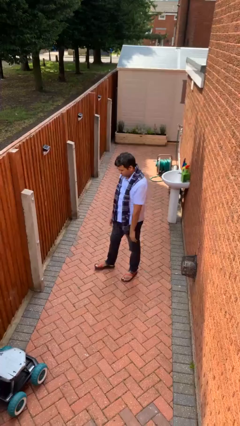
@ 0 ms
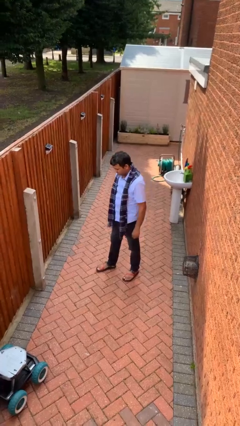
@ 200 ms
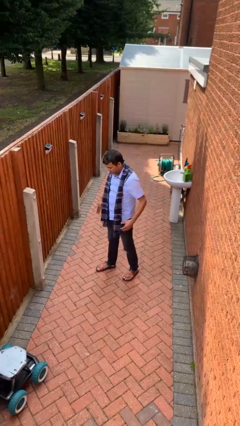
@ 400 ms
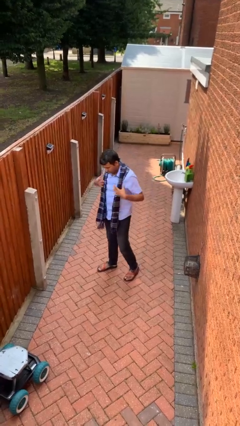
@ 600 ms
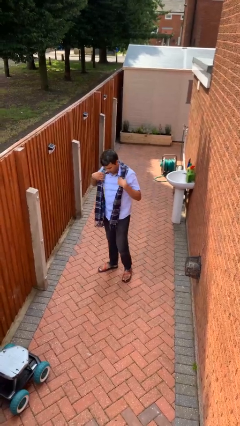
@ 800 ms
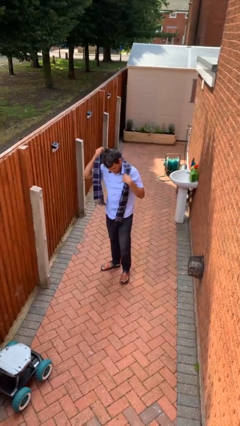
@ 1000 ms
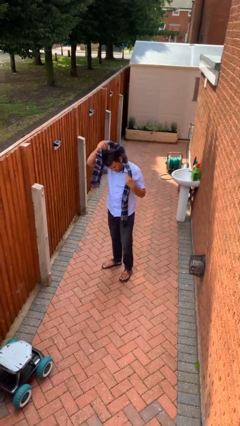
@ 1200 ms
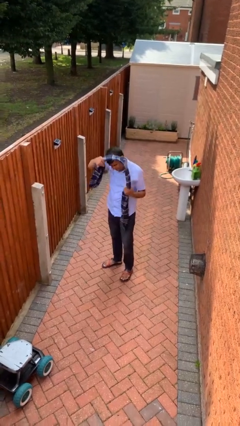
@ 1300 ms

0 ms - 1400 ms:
person takes off scarf

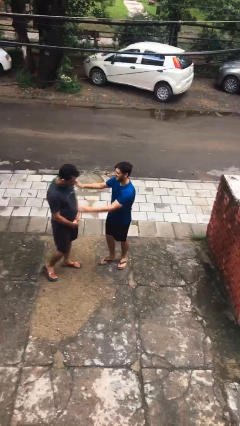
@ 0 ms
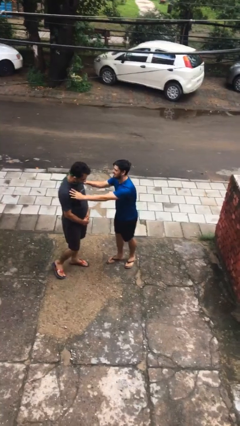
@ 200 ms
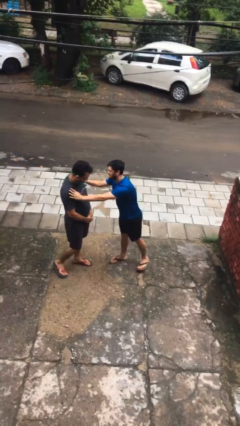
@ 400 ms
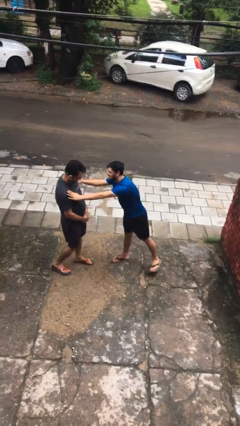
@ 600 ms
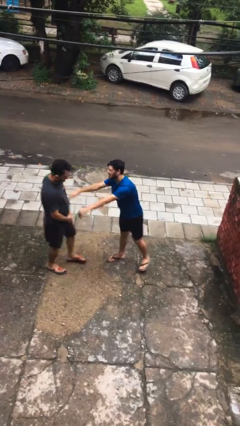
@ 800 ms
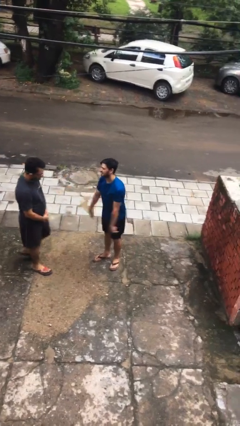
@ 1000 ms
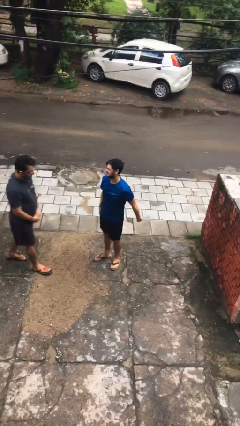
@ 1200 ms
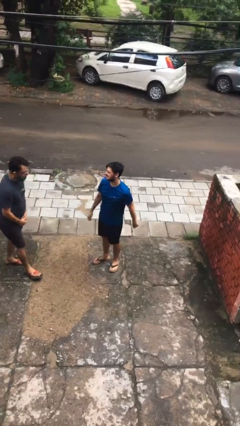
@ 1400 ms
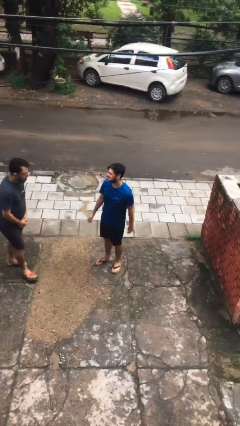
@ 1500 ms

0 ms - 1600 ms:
person shoves person

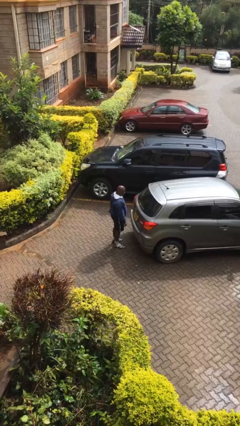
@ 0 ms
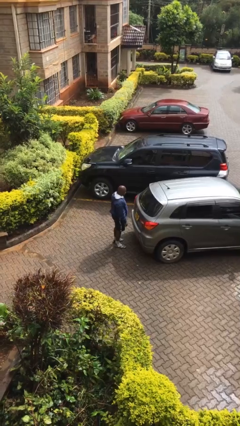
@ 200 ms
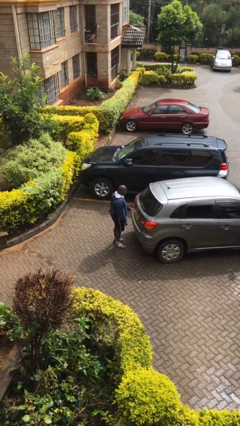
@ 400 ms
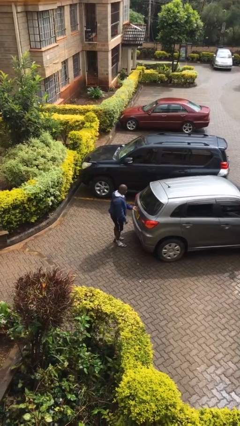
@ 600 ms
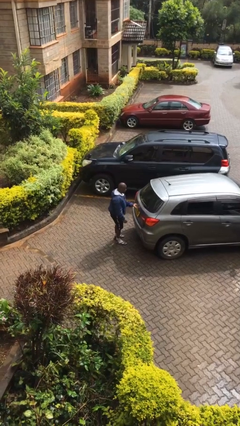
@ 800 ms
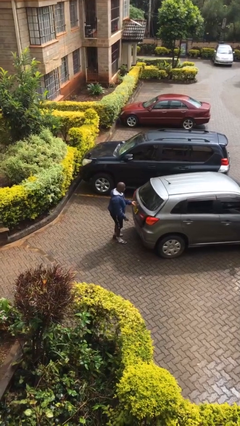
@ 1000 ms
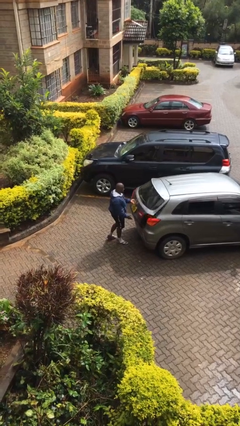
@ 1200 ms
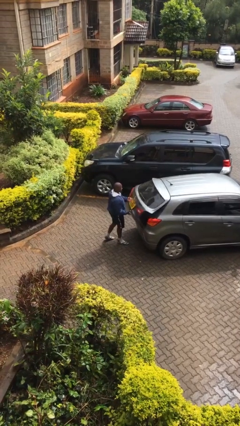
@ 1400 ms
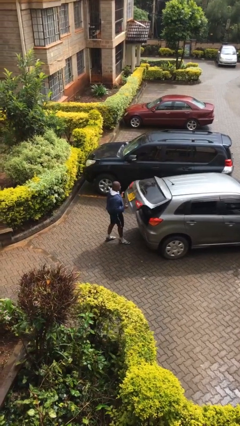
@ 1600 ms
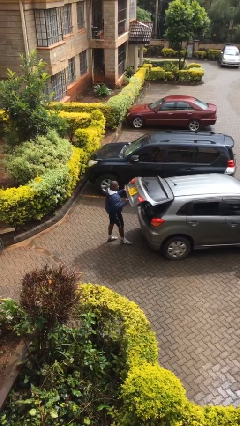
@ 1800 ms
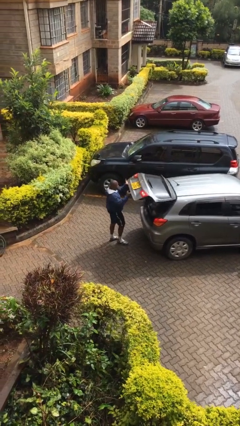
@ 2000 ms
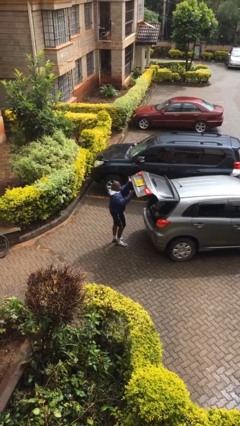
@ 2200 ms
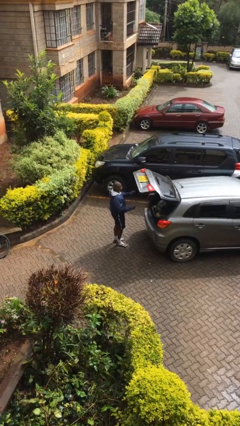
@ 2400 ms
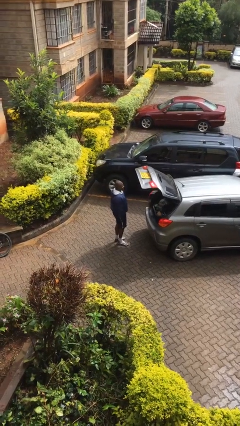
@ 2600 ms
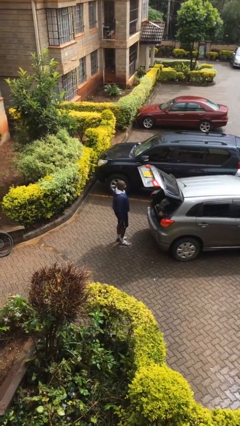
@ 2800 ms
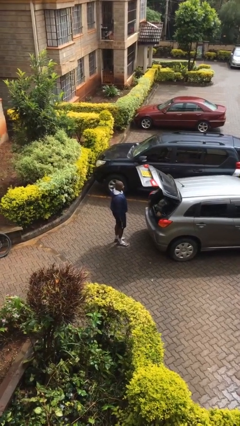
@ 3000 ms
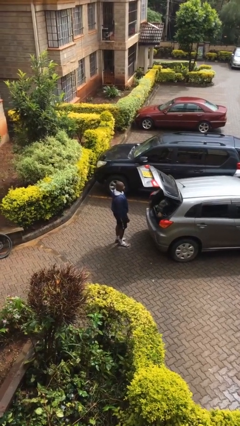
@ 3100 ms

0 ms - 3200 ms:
person opens car trunk

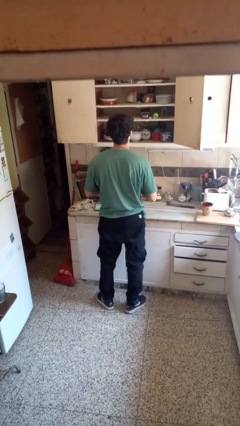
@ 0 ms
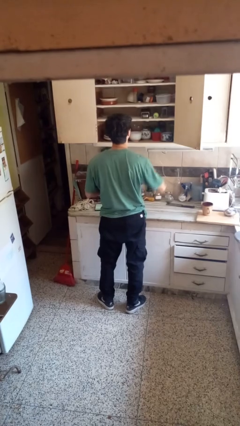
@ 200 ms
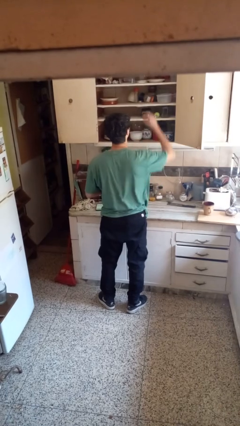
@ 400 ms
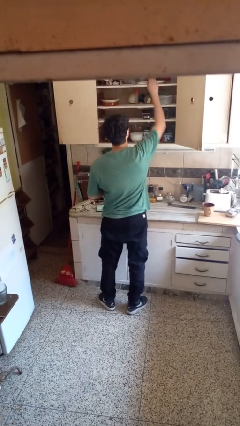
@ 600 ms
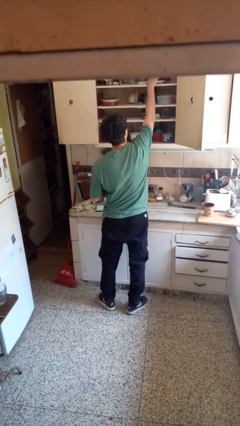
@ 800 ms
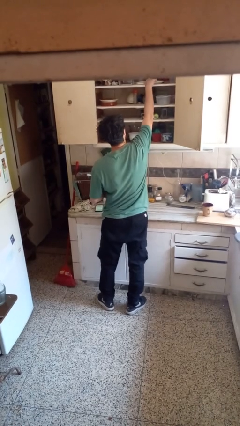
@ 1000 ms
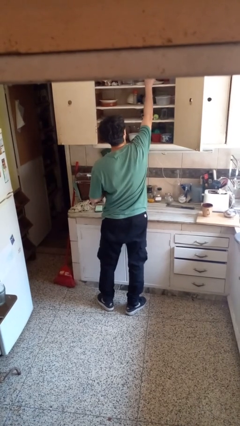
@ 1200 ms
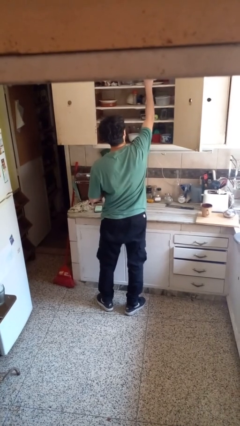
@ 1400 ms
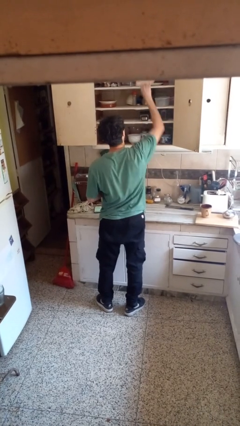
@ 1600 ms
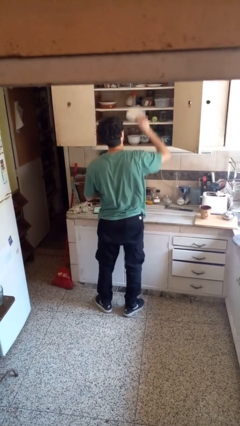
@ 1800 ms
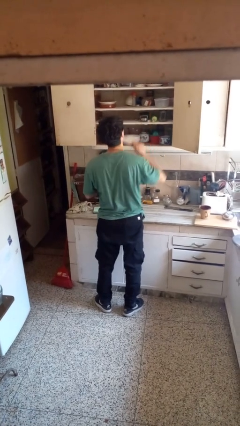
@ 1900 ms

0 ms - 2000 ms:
person takes object from cabinet

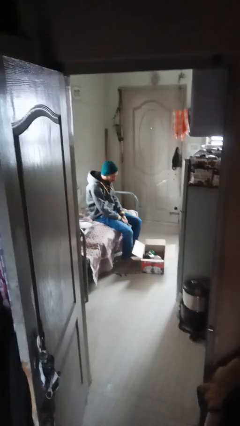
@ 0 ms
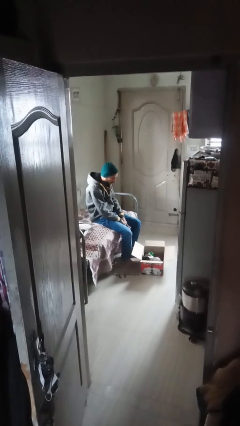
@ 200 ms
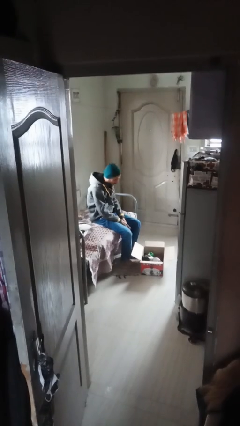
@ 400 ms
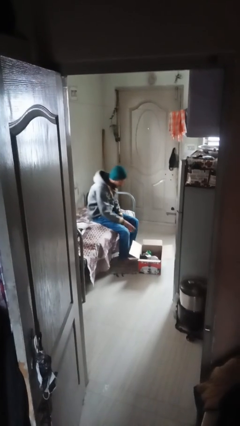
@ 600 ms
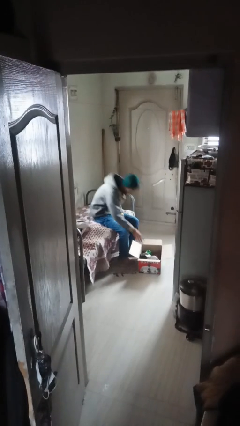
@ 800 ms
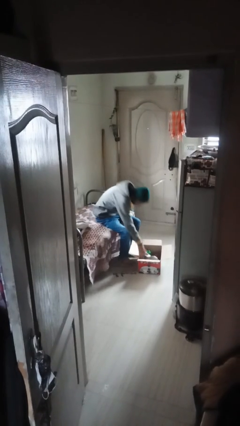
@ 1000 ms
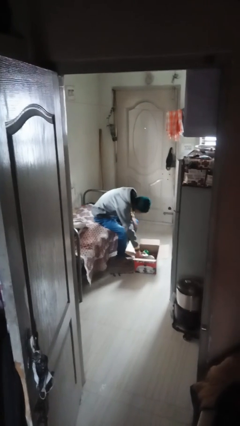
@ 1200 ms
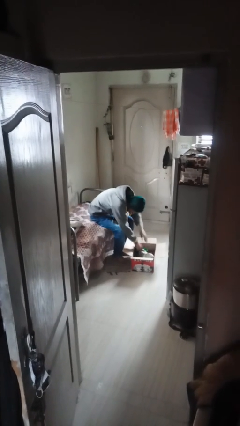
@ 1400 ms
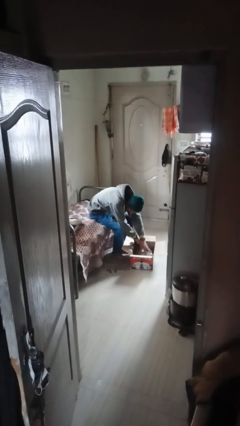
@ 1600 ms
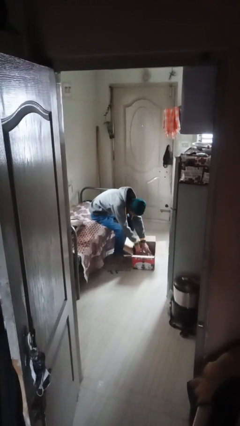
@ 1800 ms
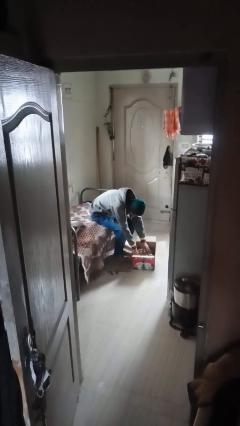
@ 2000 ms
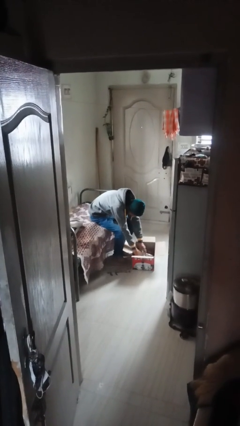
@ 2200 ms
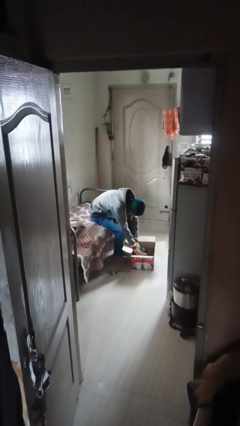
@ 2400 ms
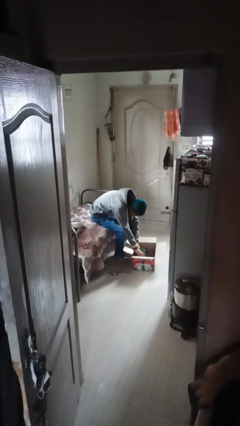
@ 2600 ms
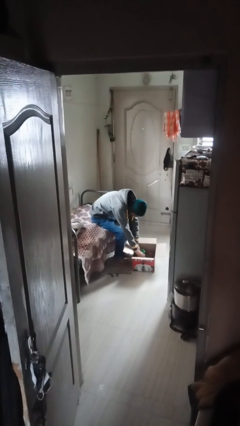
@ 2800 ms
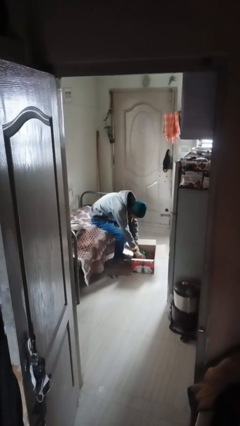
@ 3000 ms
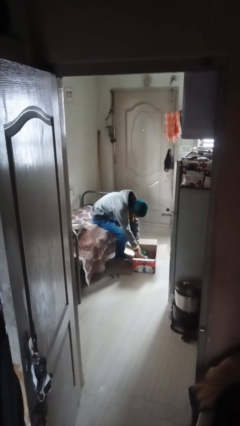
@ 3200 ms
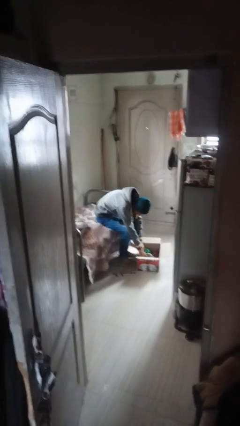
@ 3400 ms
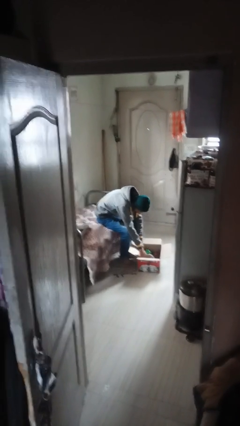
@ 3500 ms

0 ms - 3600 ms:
person searches in box

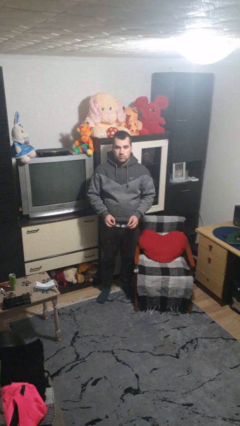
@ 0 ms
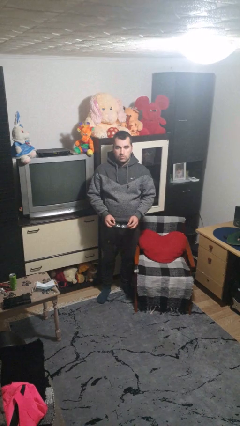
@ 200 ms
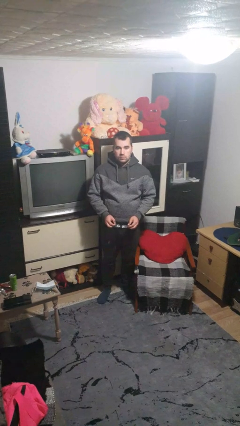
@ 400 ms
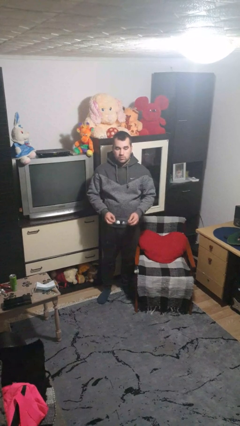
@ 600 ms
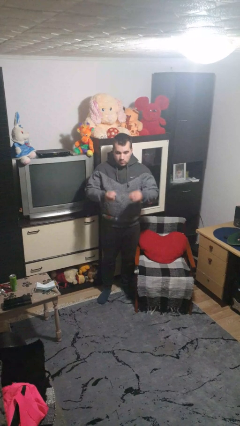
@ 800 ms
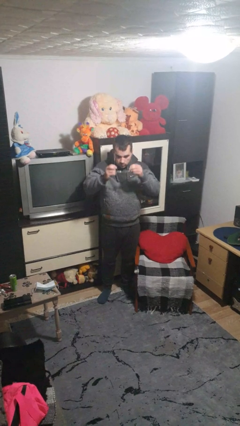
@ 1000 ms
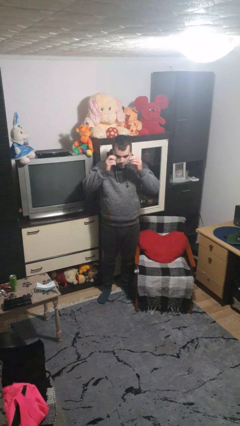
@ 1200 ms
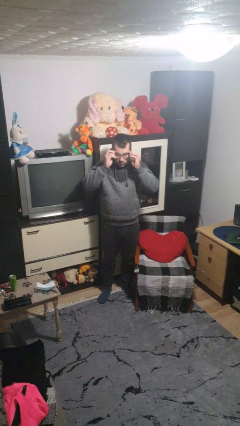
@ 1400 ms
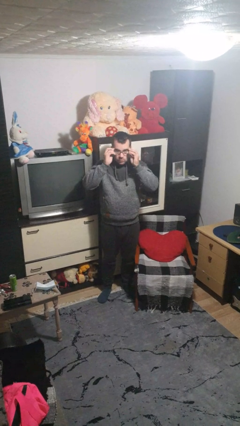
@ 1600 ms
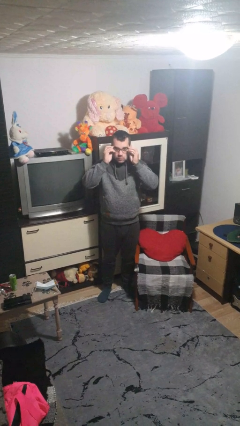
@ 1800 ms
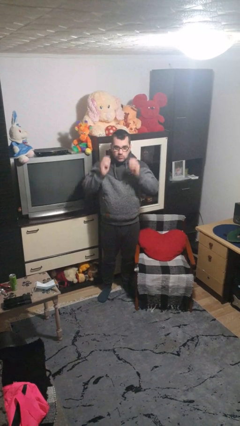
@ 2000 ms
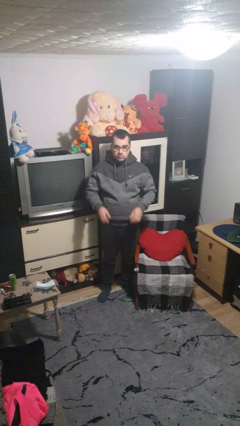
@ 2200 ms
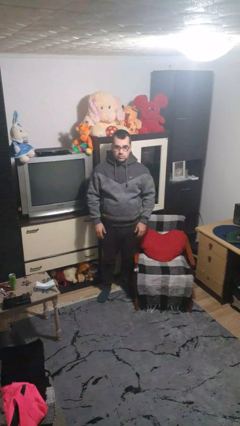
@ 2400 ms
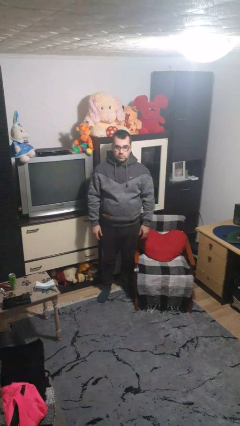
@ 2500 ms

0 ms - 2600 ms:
person puts on glasses

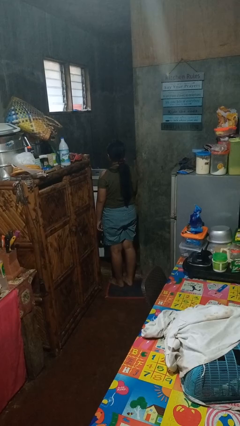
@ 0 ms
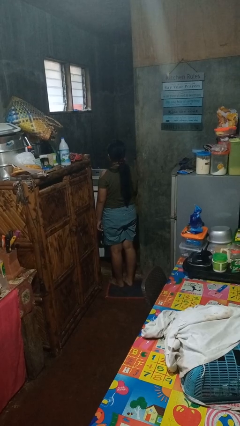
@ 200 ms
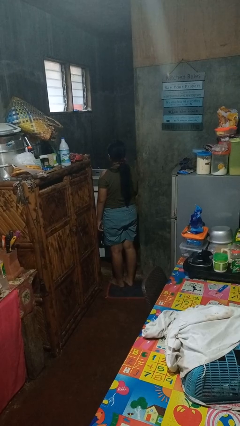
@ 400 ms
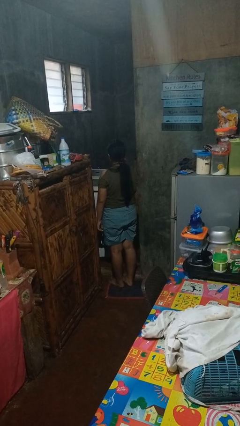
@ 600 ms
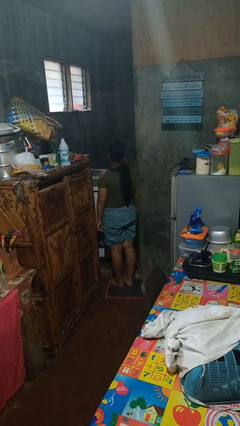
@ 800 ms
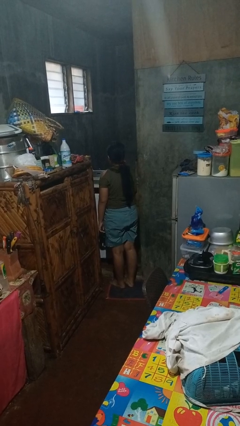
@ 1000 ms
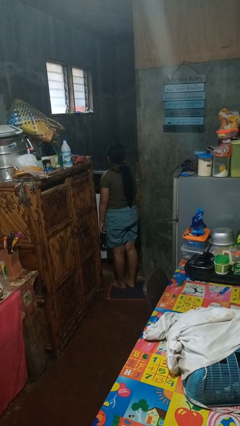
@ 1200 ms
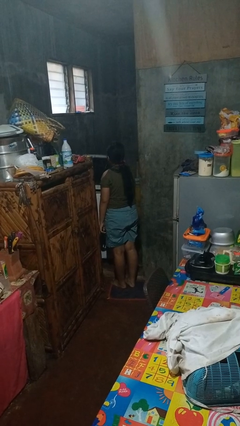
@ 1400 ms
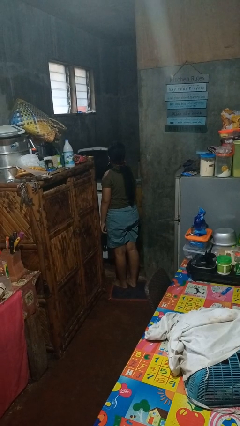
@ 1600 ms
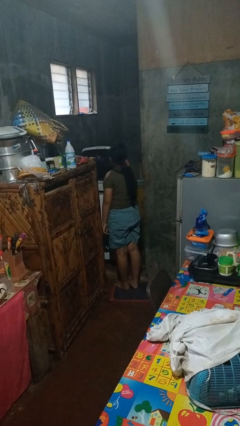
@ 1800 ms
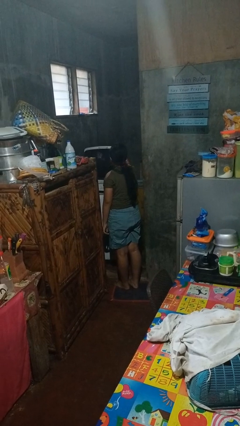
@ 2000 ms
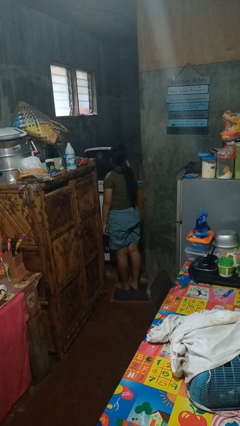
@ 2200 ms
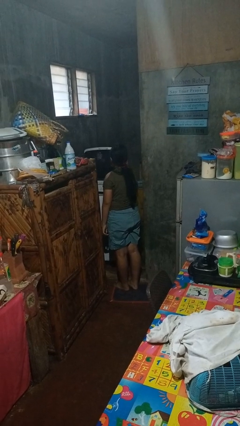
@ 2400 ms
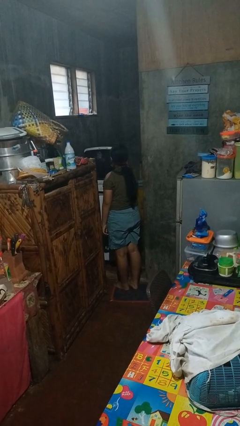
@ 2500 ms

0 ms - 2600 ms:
person opens clothes washer

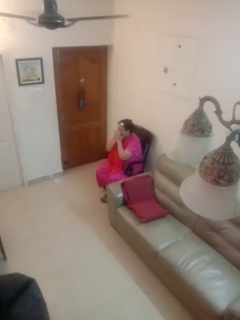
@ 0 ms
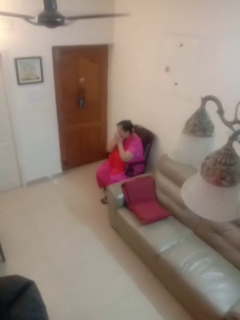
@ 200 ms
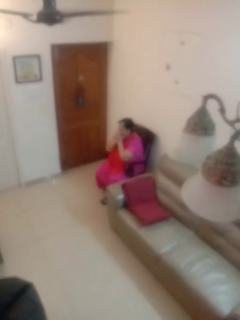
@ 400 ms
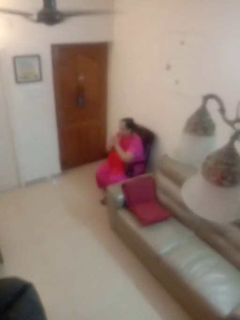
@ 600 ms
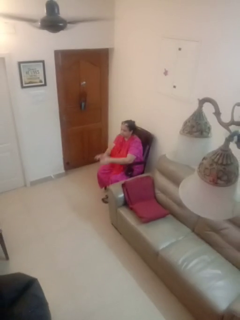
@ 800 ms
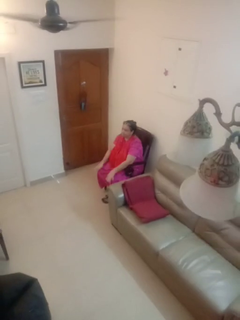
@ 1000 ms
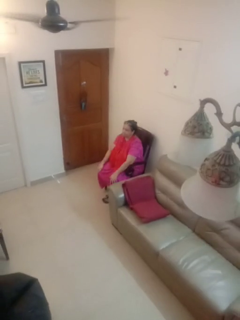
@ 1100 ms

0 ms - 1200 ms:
person sneezes into hand
